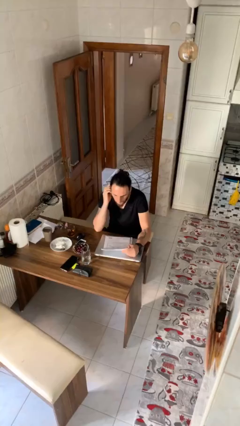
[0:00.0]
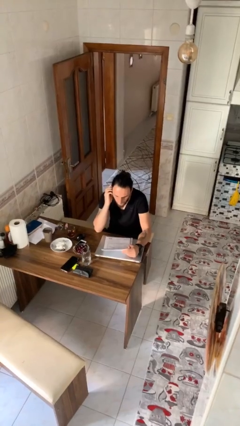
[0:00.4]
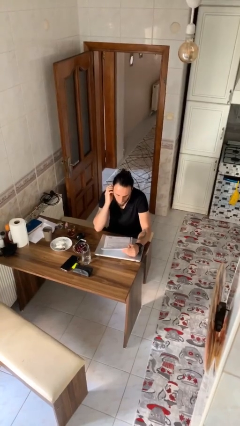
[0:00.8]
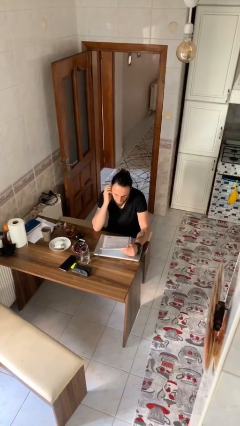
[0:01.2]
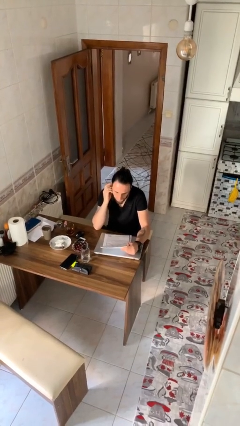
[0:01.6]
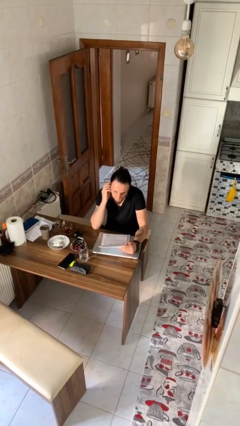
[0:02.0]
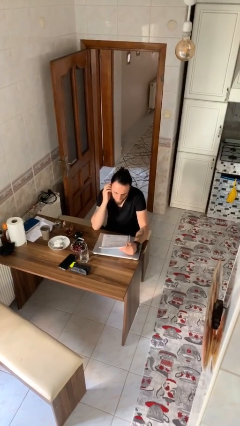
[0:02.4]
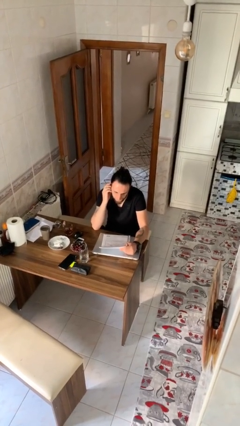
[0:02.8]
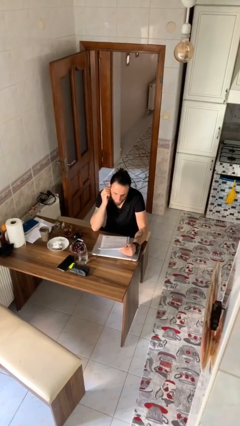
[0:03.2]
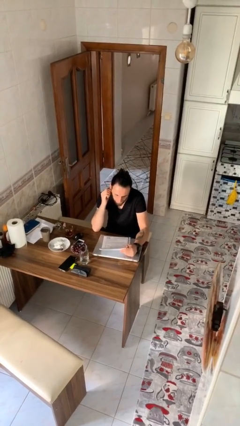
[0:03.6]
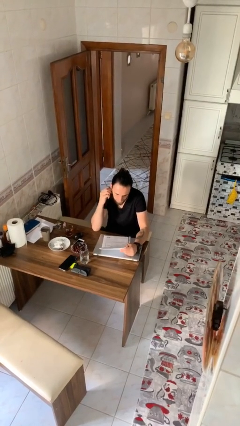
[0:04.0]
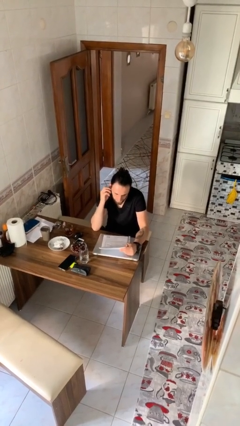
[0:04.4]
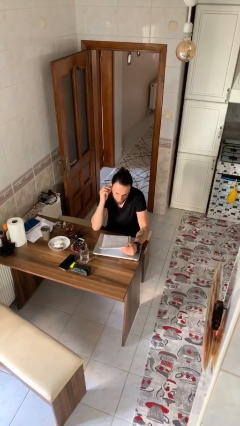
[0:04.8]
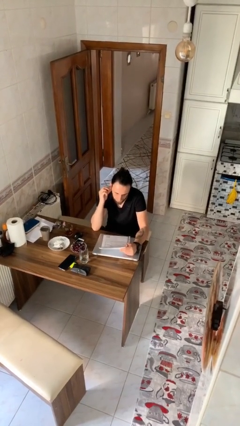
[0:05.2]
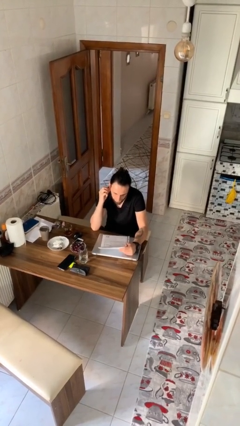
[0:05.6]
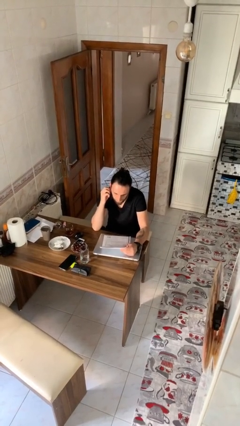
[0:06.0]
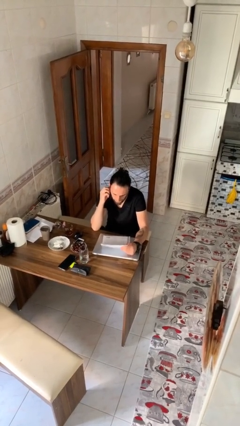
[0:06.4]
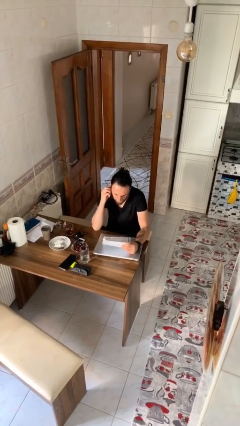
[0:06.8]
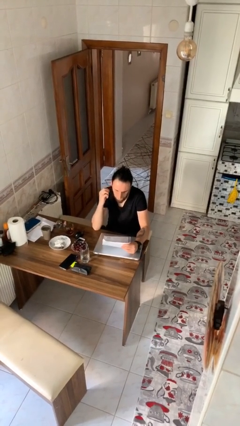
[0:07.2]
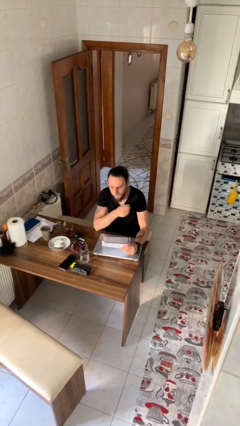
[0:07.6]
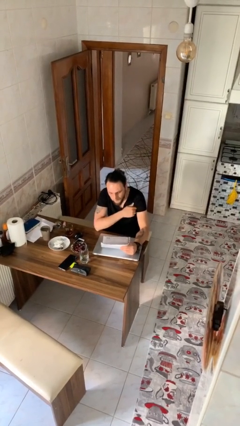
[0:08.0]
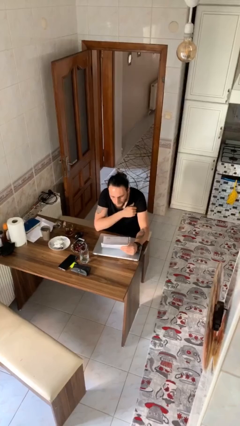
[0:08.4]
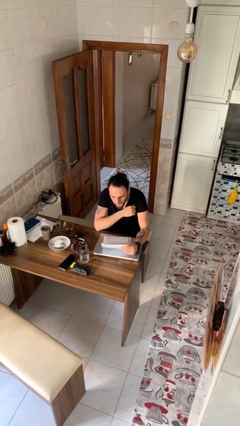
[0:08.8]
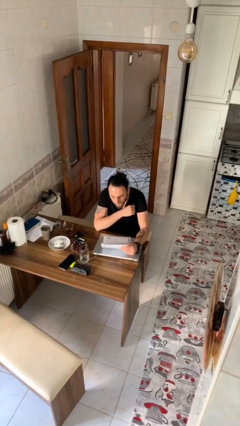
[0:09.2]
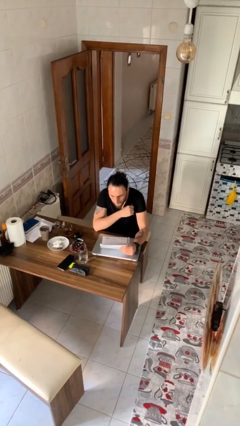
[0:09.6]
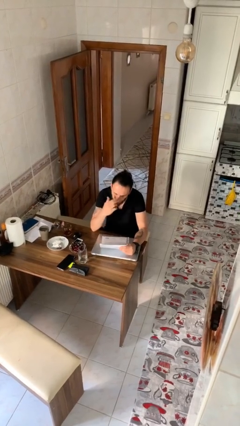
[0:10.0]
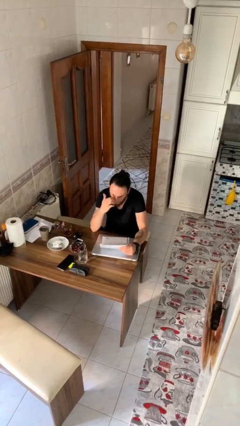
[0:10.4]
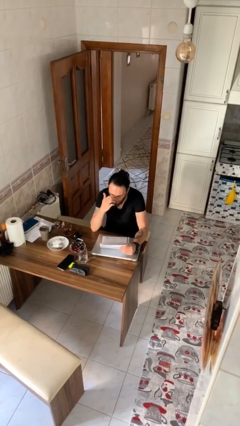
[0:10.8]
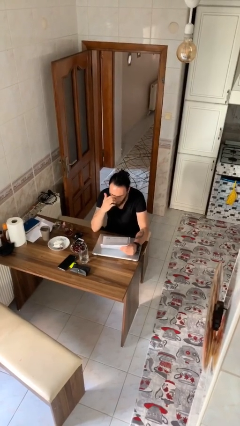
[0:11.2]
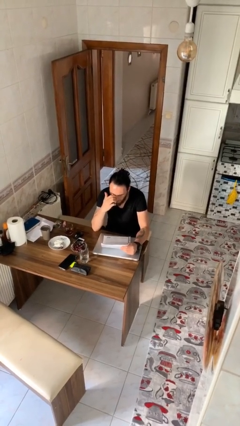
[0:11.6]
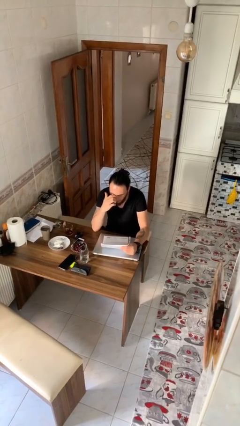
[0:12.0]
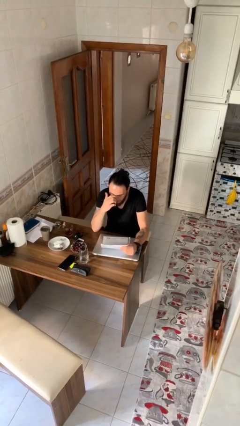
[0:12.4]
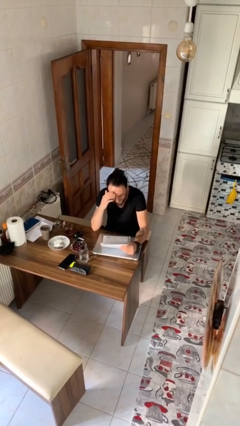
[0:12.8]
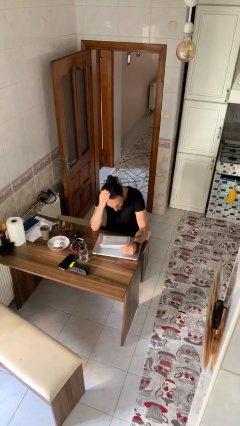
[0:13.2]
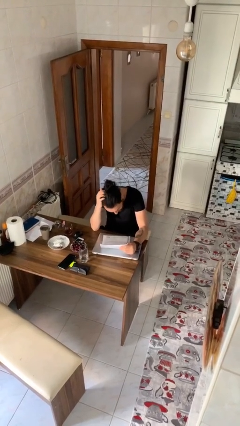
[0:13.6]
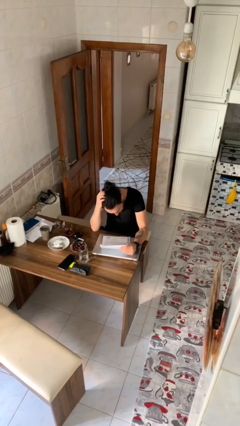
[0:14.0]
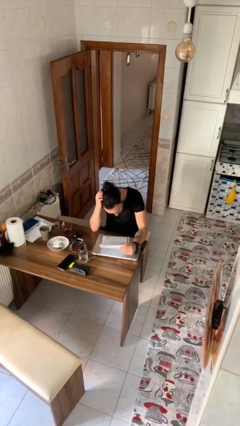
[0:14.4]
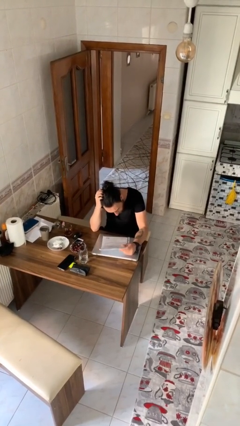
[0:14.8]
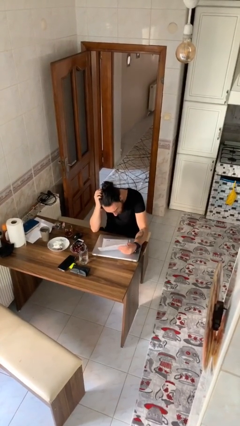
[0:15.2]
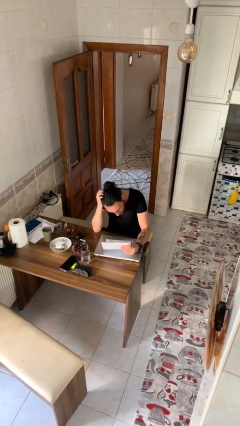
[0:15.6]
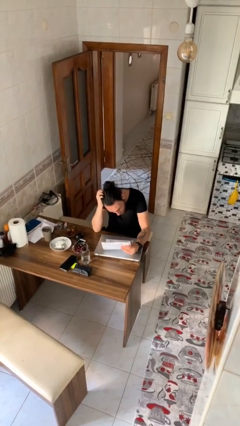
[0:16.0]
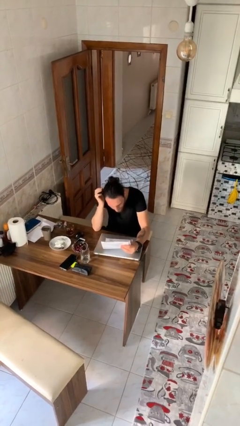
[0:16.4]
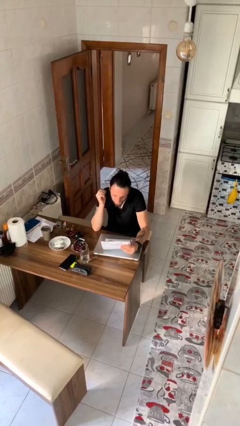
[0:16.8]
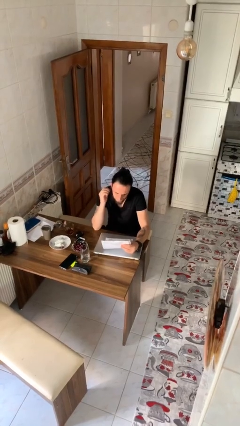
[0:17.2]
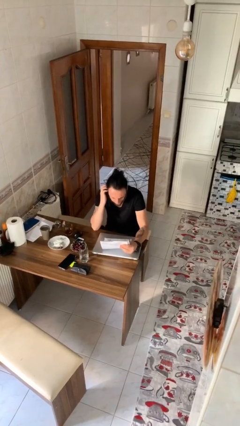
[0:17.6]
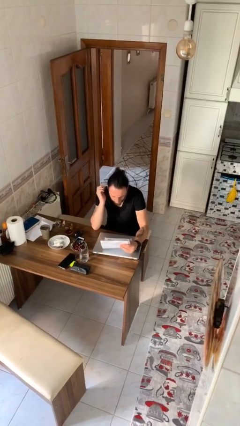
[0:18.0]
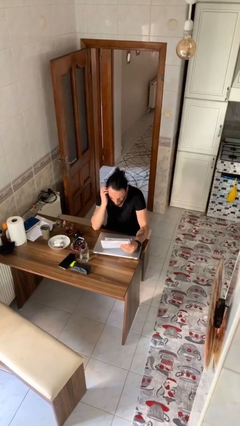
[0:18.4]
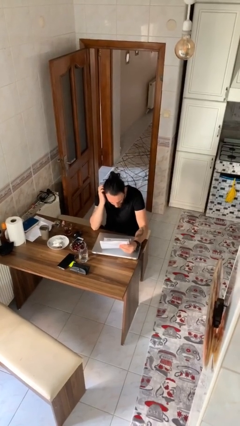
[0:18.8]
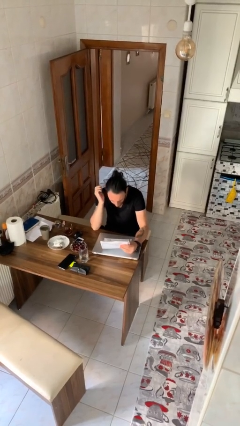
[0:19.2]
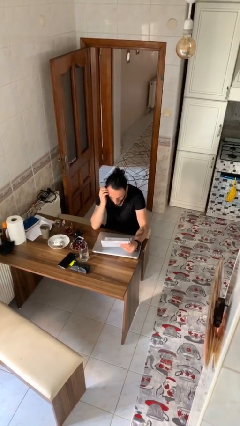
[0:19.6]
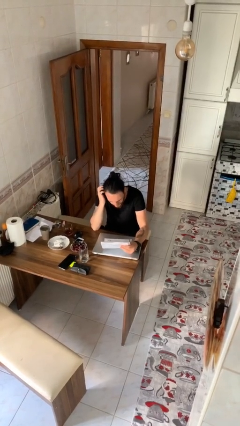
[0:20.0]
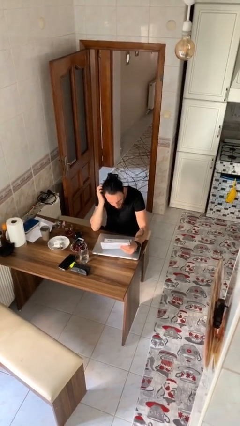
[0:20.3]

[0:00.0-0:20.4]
person reads document

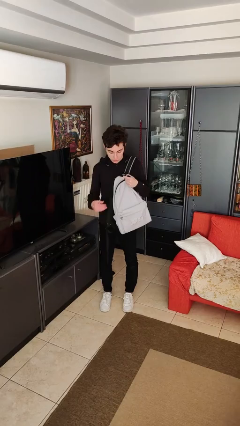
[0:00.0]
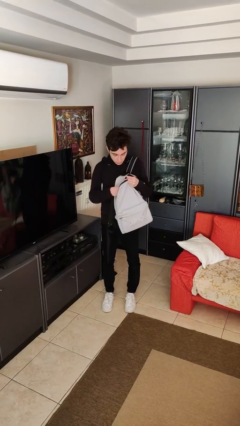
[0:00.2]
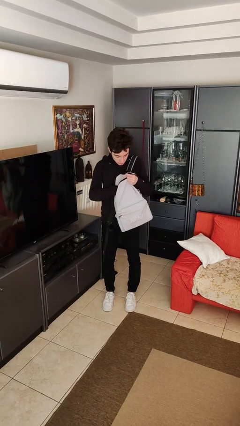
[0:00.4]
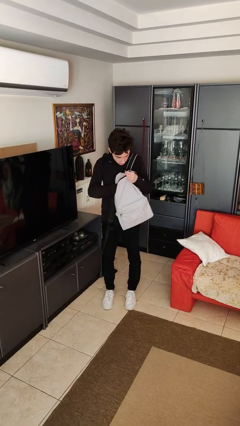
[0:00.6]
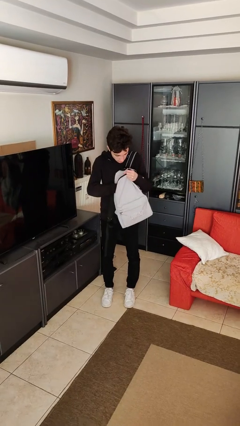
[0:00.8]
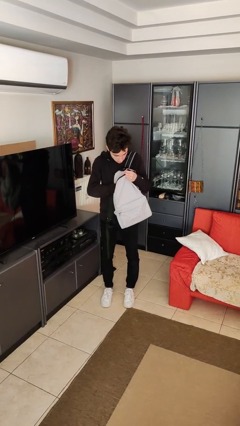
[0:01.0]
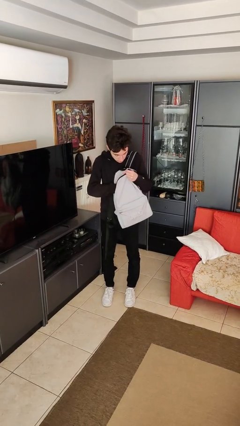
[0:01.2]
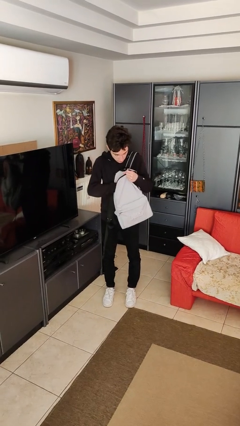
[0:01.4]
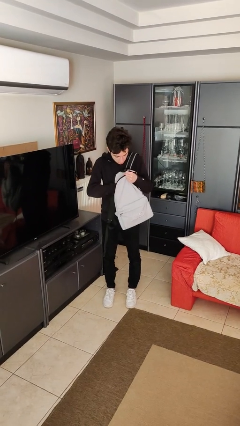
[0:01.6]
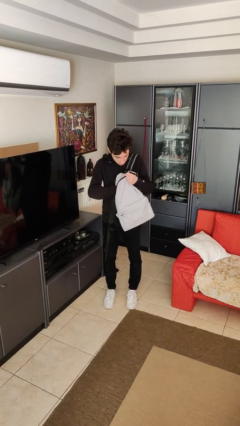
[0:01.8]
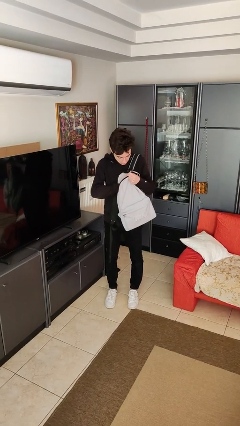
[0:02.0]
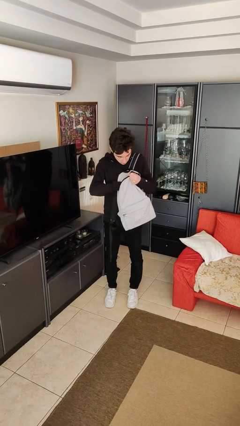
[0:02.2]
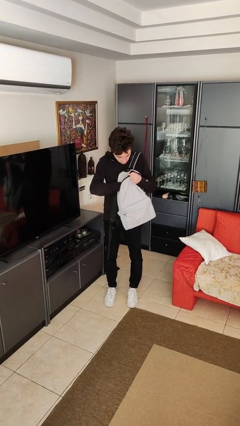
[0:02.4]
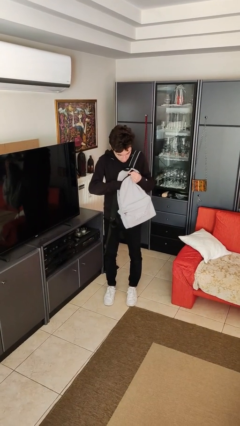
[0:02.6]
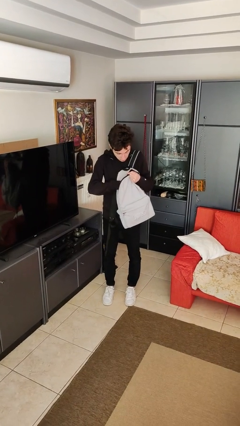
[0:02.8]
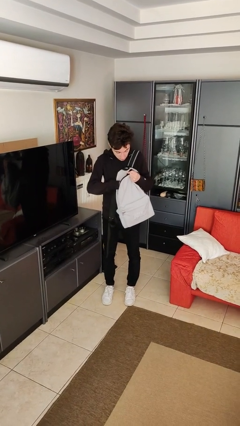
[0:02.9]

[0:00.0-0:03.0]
person searches in backpack

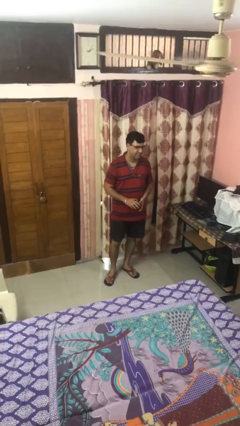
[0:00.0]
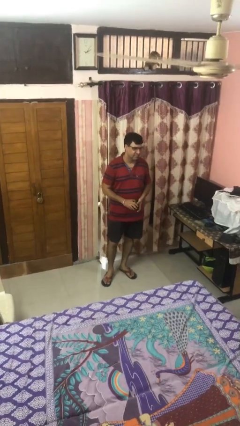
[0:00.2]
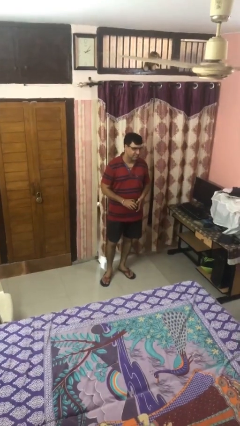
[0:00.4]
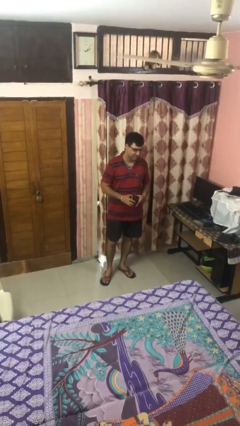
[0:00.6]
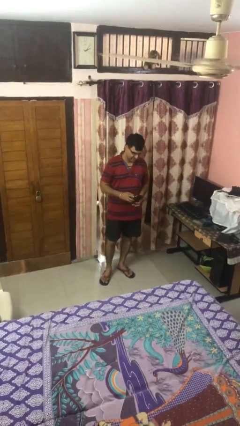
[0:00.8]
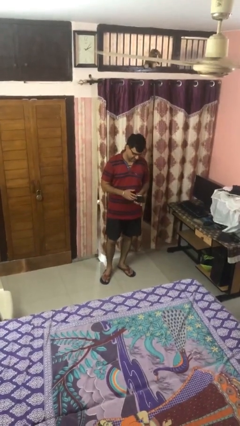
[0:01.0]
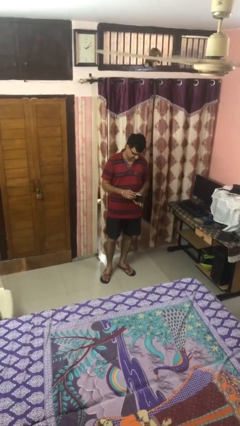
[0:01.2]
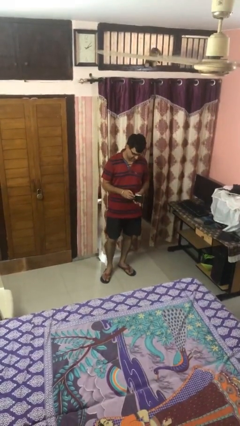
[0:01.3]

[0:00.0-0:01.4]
person searches in purse

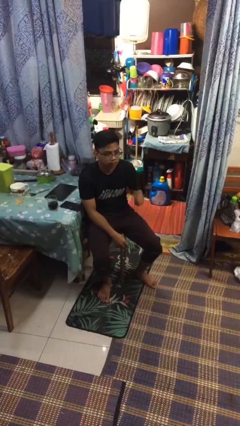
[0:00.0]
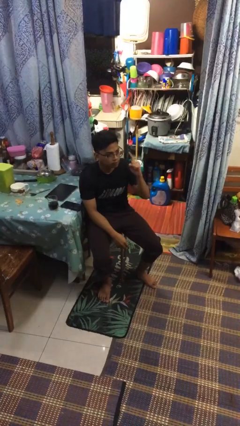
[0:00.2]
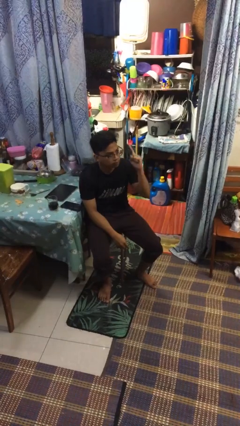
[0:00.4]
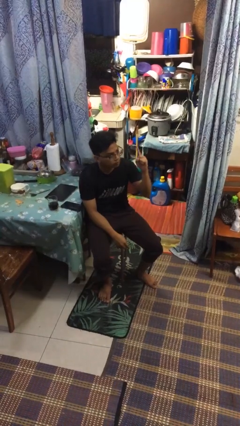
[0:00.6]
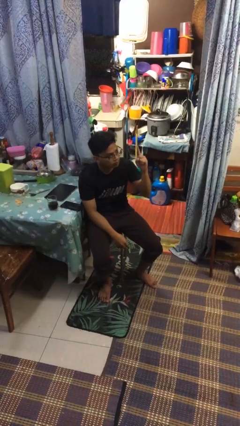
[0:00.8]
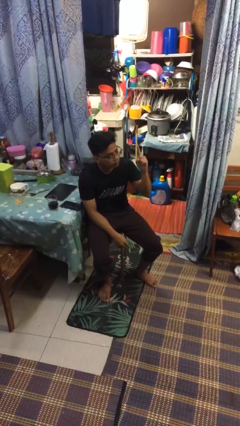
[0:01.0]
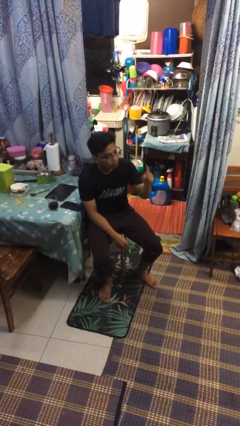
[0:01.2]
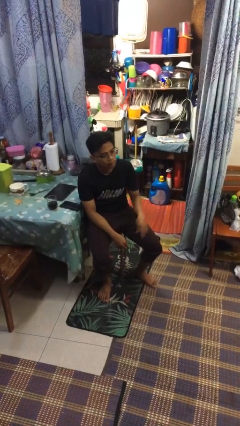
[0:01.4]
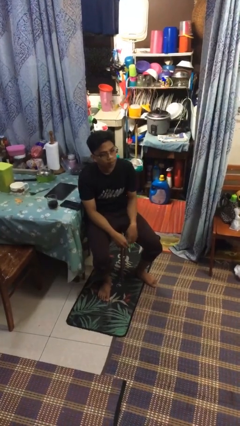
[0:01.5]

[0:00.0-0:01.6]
person gestures number one

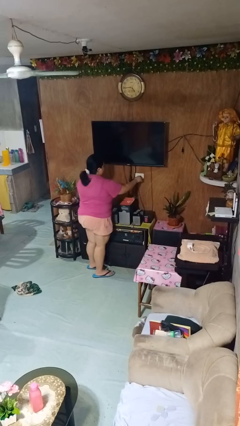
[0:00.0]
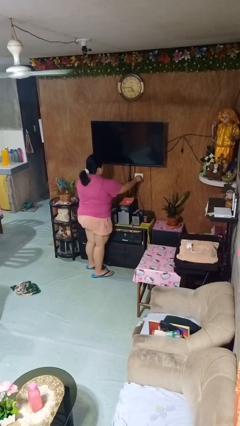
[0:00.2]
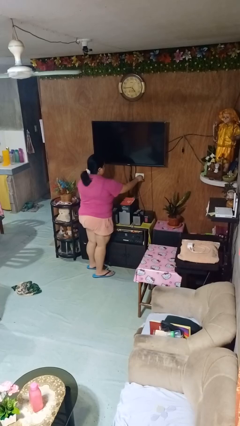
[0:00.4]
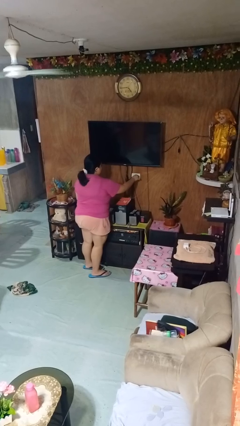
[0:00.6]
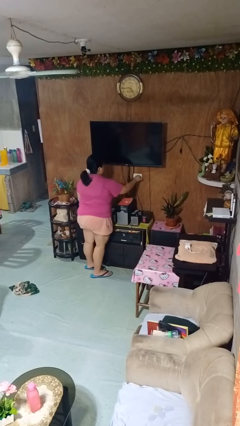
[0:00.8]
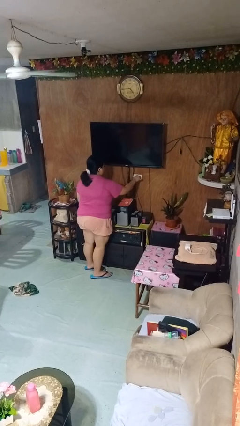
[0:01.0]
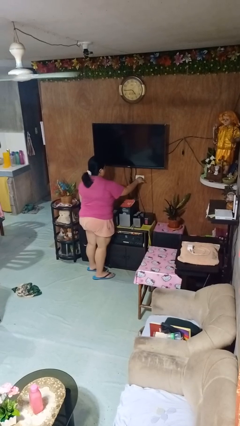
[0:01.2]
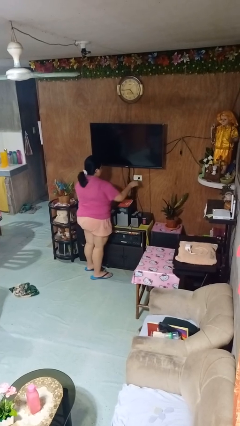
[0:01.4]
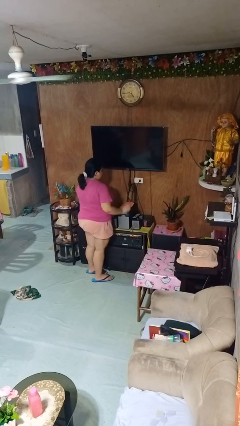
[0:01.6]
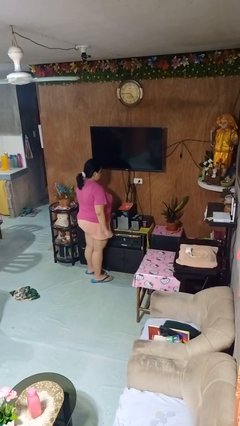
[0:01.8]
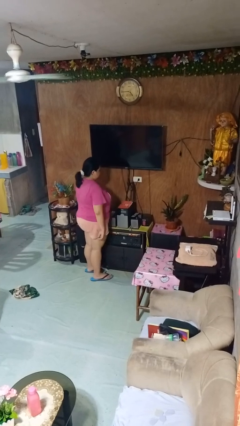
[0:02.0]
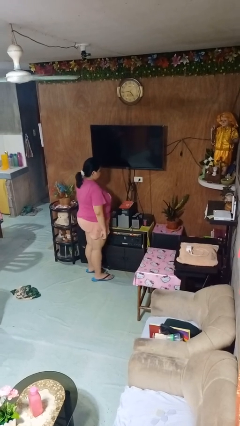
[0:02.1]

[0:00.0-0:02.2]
person plugs into electrical socket
